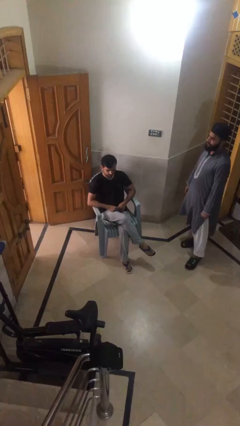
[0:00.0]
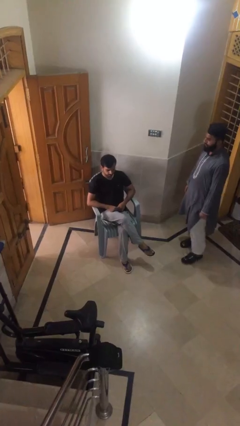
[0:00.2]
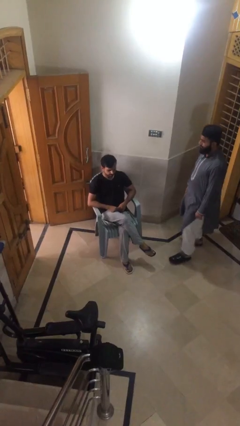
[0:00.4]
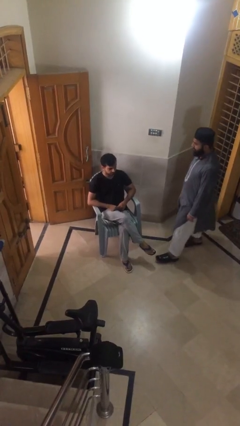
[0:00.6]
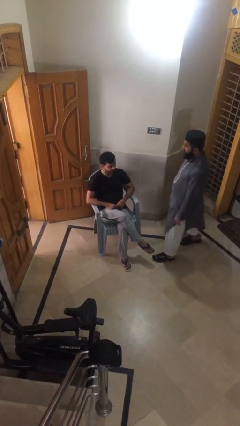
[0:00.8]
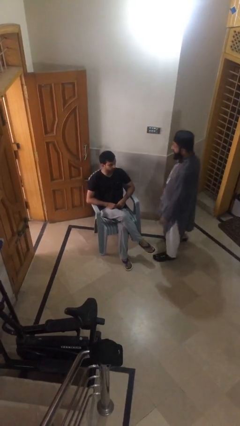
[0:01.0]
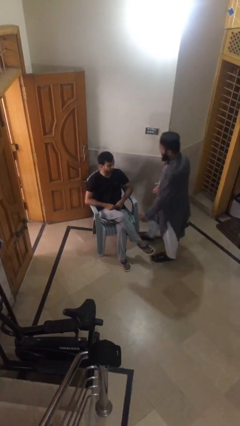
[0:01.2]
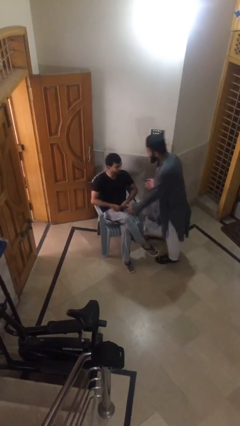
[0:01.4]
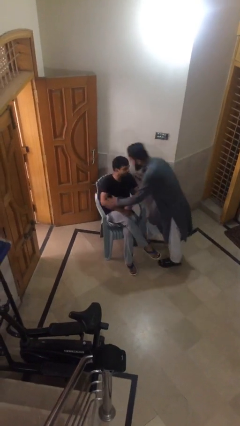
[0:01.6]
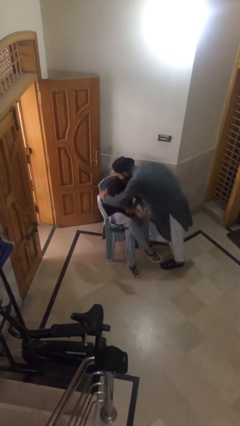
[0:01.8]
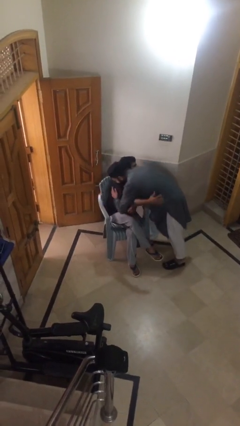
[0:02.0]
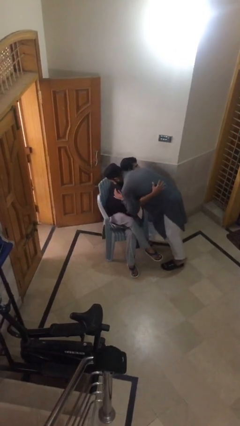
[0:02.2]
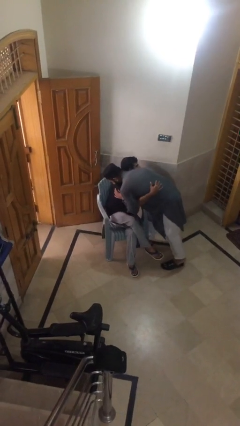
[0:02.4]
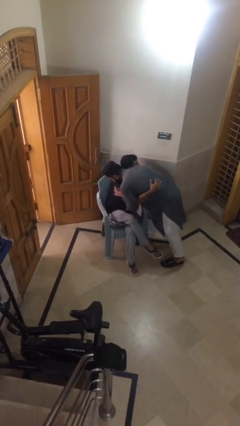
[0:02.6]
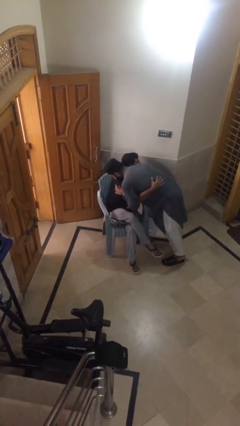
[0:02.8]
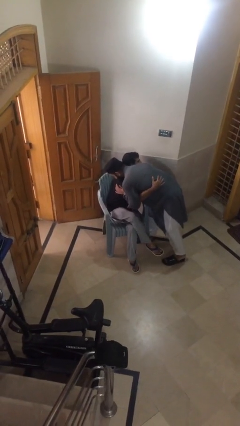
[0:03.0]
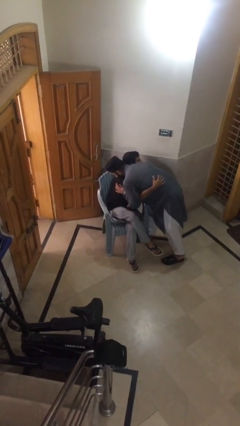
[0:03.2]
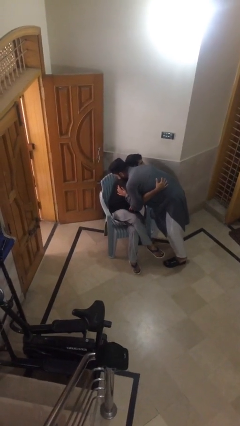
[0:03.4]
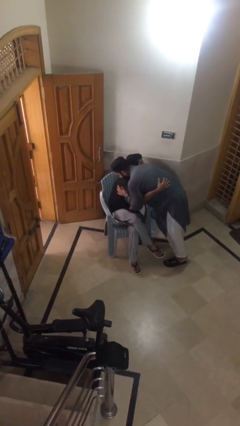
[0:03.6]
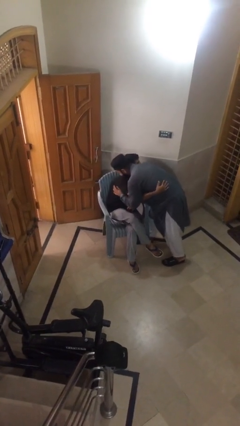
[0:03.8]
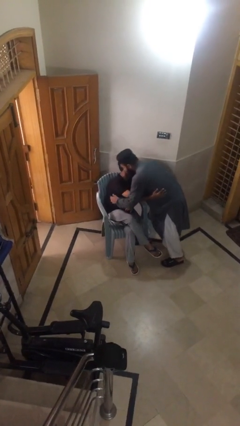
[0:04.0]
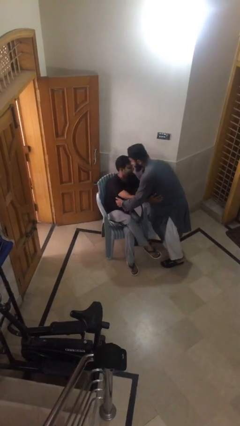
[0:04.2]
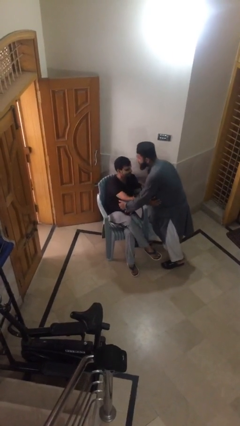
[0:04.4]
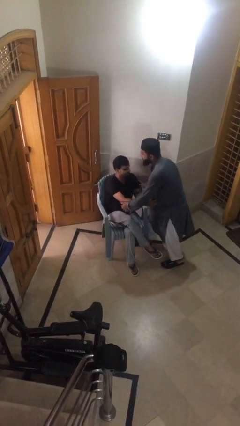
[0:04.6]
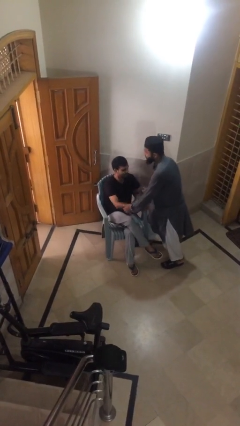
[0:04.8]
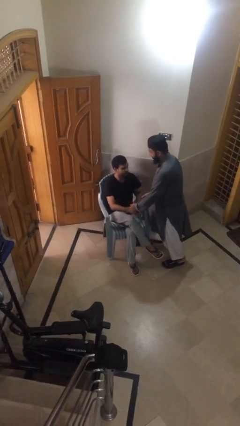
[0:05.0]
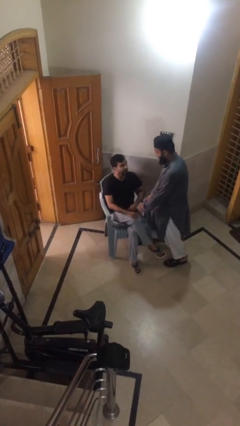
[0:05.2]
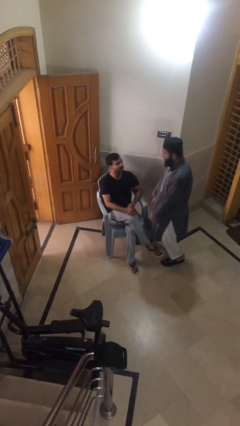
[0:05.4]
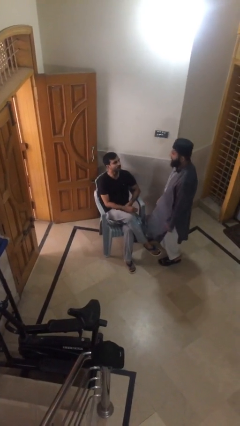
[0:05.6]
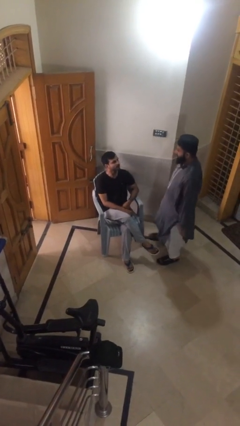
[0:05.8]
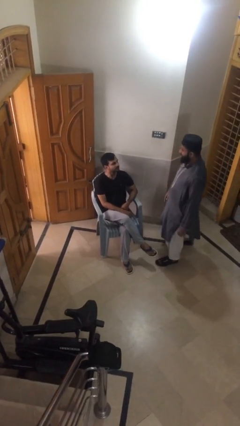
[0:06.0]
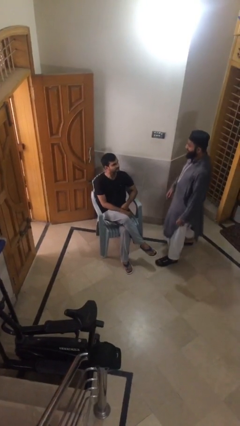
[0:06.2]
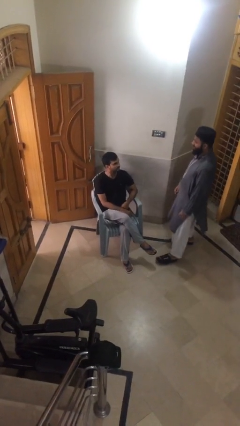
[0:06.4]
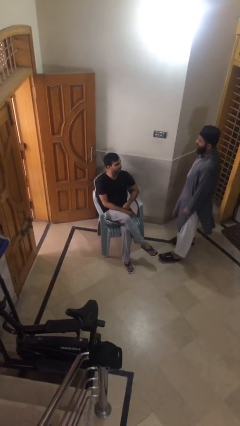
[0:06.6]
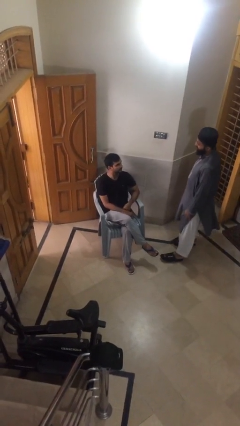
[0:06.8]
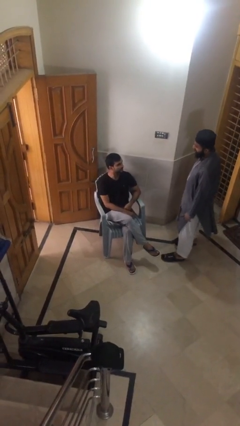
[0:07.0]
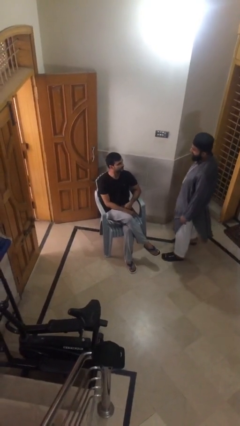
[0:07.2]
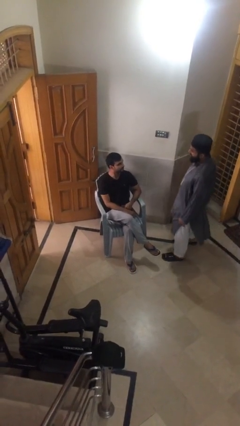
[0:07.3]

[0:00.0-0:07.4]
person embraces person

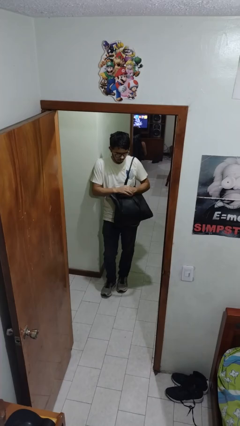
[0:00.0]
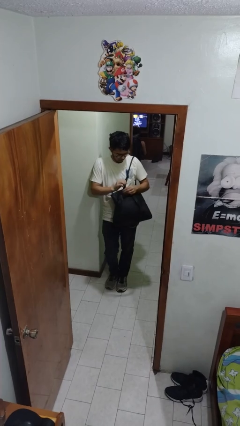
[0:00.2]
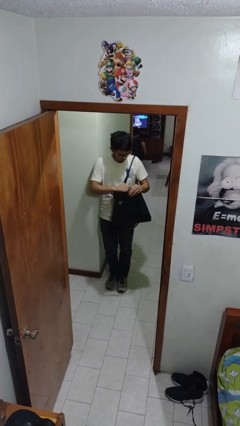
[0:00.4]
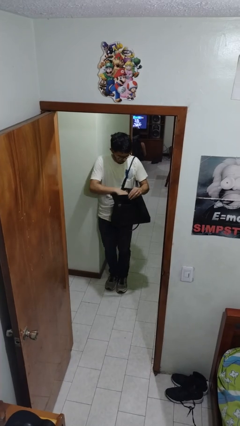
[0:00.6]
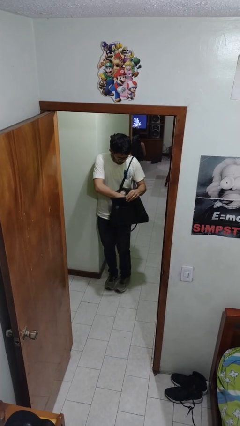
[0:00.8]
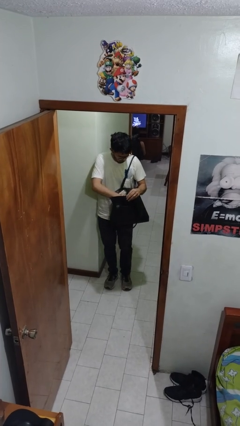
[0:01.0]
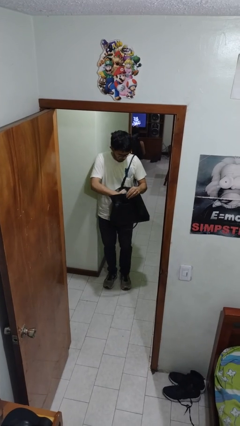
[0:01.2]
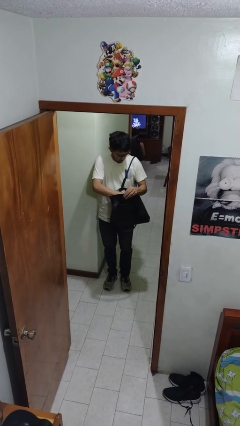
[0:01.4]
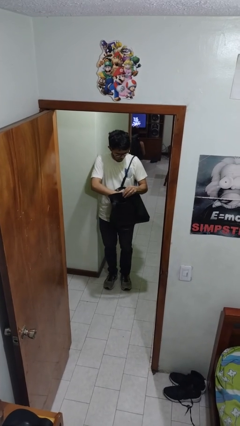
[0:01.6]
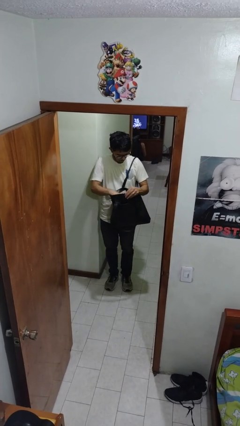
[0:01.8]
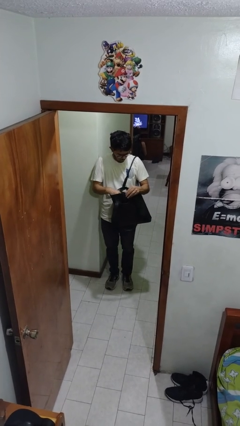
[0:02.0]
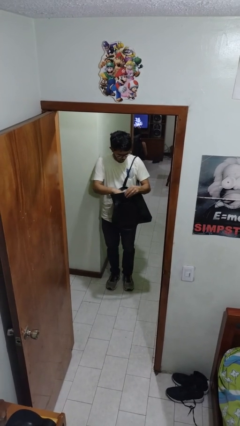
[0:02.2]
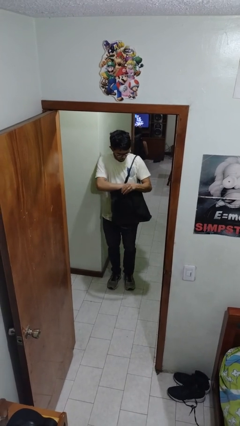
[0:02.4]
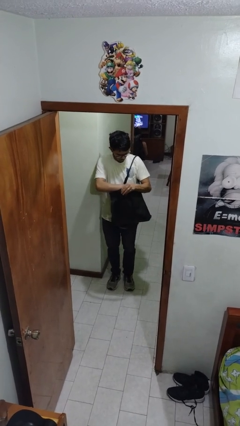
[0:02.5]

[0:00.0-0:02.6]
person searches in purse

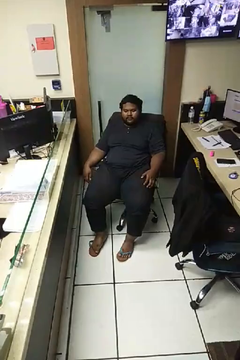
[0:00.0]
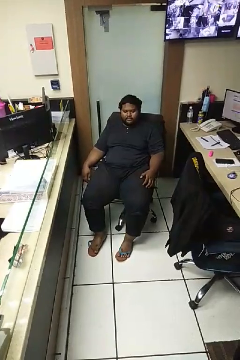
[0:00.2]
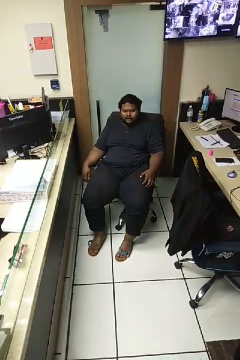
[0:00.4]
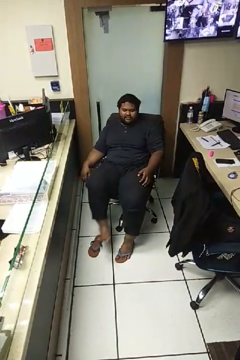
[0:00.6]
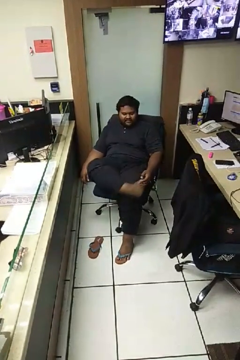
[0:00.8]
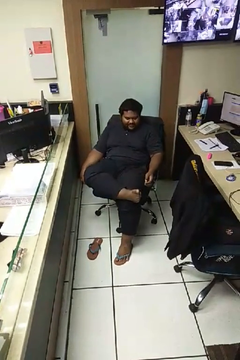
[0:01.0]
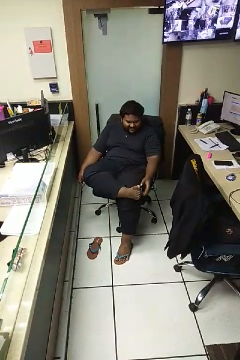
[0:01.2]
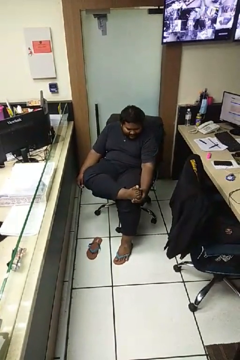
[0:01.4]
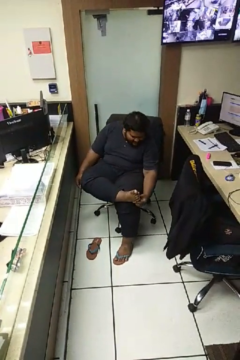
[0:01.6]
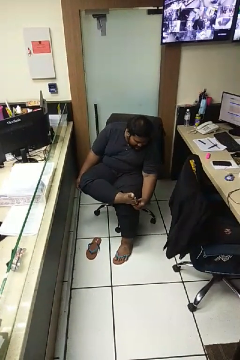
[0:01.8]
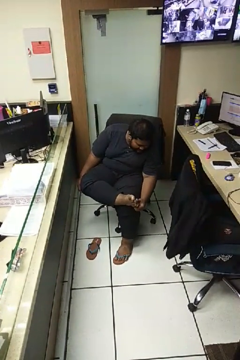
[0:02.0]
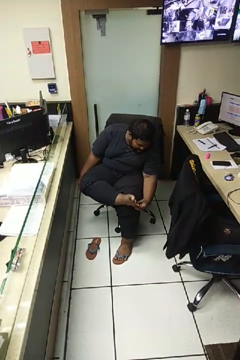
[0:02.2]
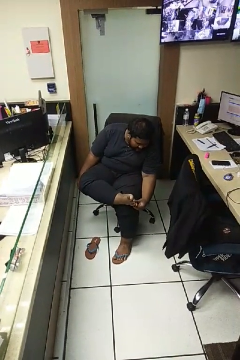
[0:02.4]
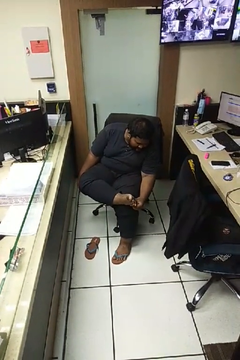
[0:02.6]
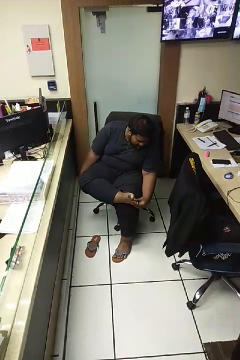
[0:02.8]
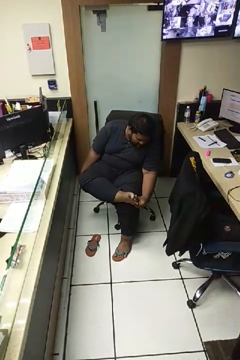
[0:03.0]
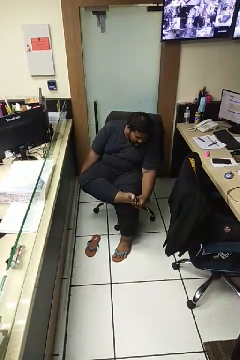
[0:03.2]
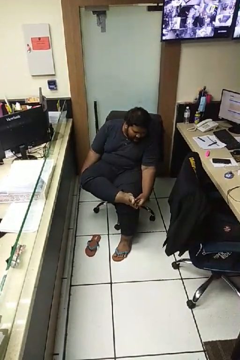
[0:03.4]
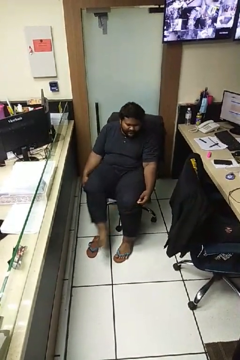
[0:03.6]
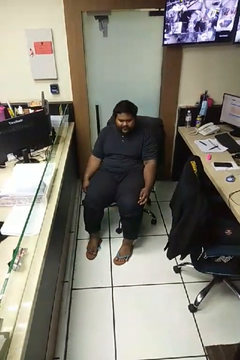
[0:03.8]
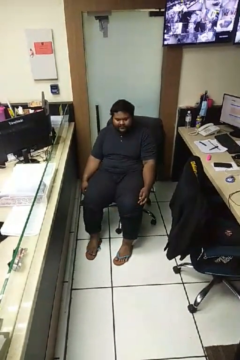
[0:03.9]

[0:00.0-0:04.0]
person rubs foot

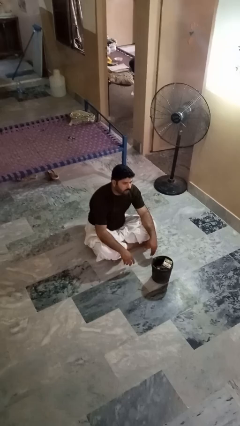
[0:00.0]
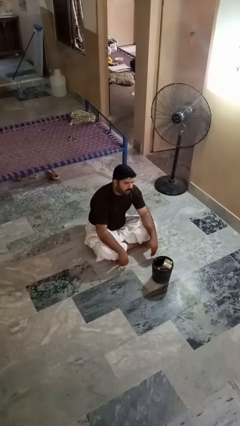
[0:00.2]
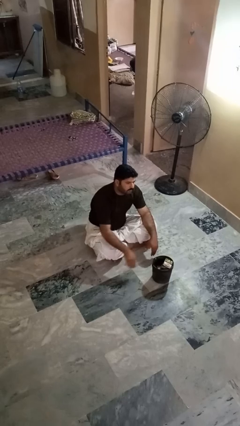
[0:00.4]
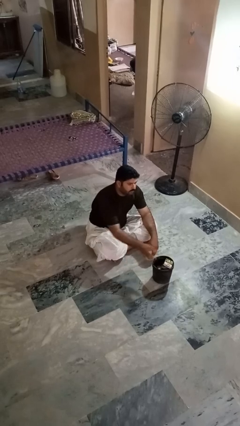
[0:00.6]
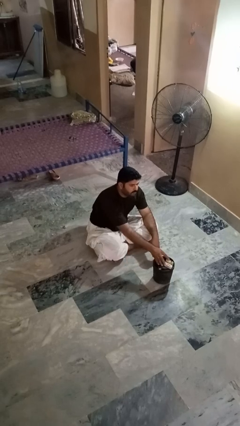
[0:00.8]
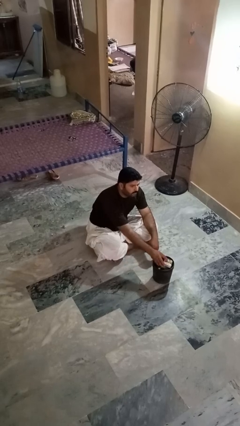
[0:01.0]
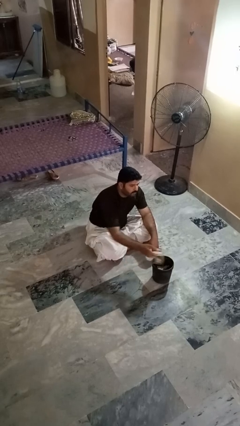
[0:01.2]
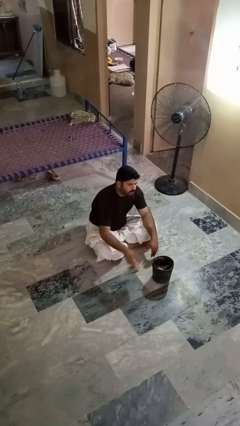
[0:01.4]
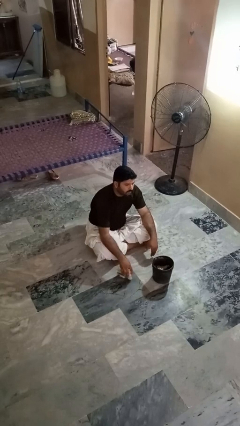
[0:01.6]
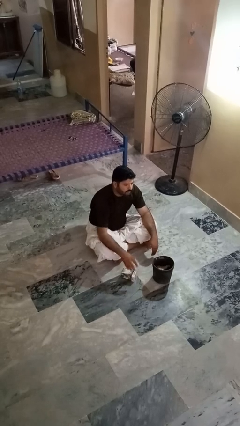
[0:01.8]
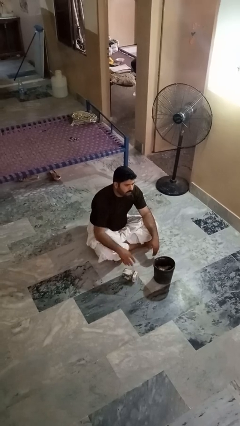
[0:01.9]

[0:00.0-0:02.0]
person takes object from basket

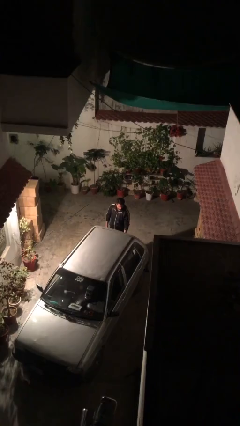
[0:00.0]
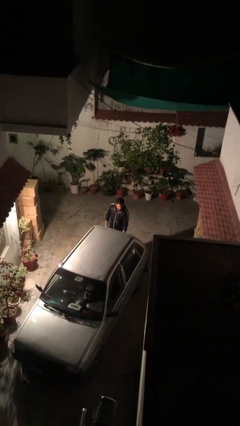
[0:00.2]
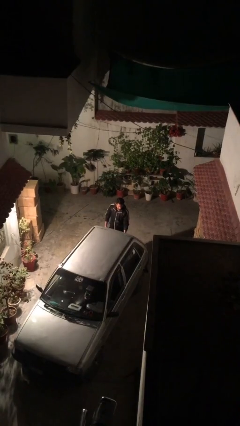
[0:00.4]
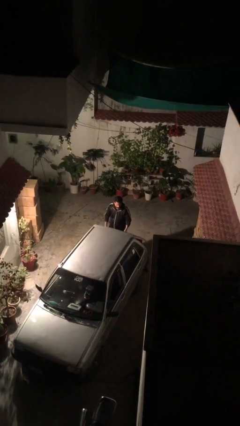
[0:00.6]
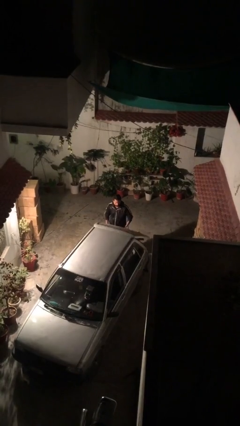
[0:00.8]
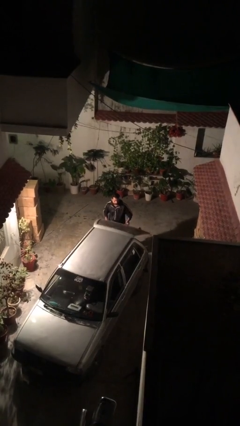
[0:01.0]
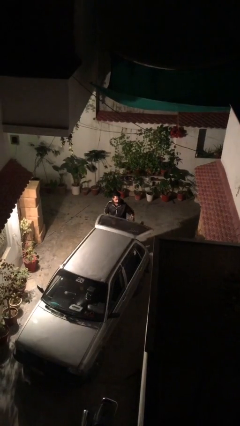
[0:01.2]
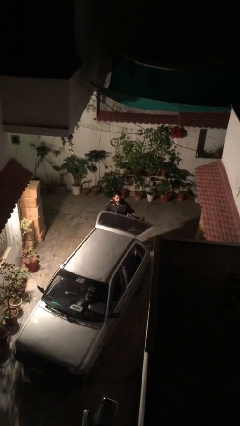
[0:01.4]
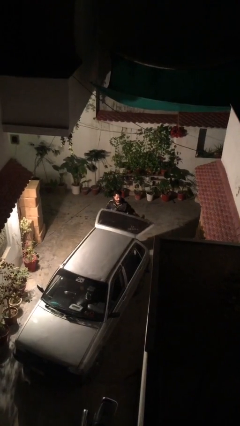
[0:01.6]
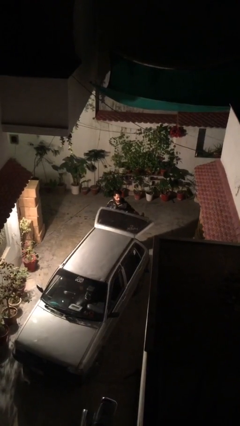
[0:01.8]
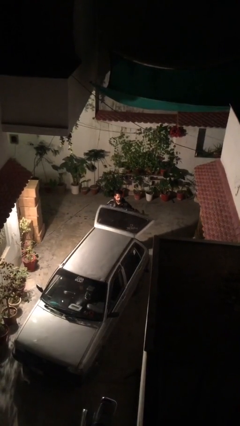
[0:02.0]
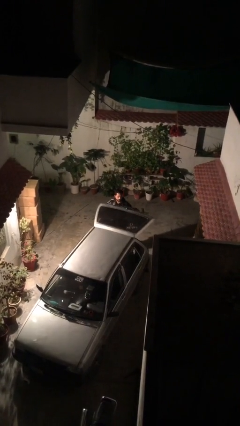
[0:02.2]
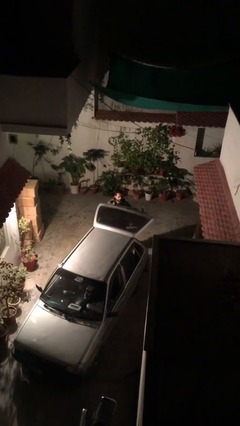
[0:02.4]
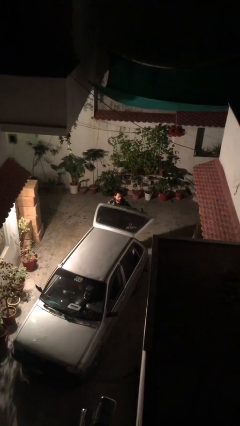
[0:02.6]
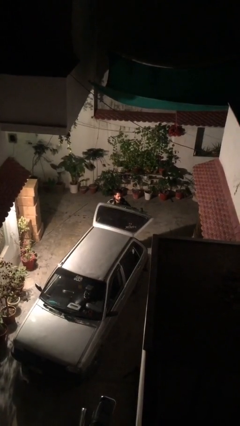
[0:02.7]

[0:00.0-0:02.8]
person opens car trunk
